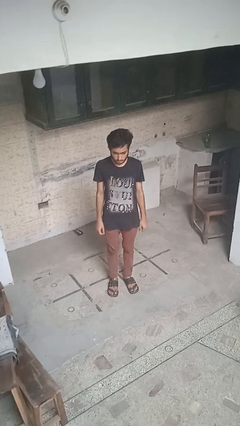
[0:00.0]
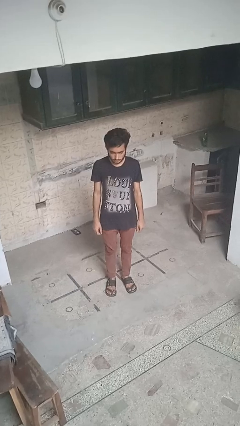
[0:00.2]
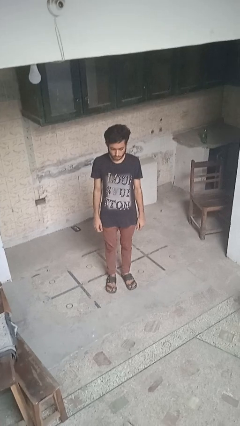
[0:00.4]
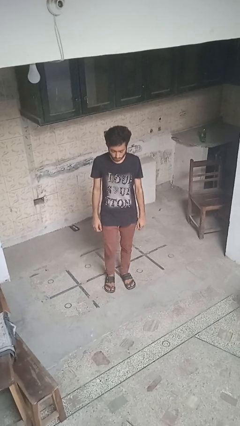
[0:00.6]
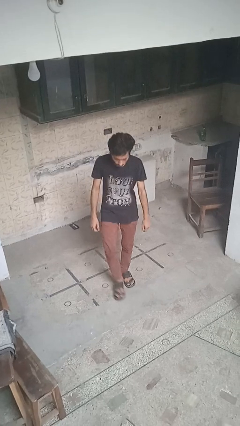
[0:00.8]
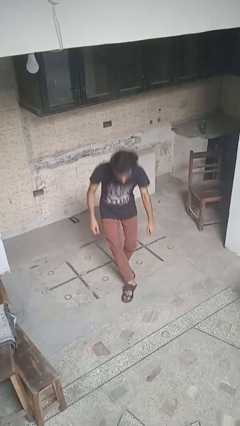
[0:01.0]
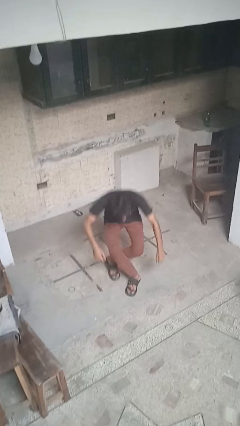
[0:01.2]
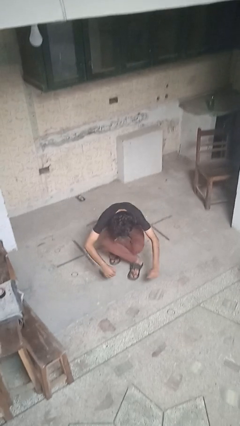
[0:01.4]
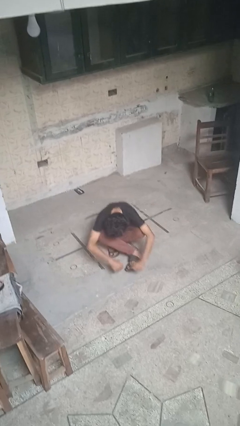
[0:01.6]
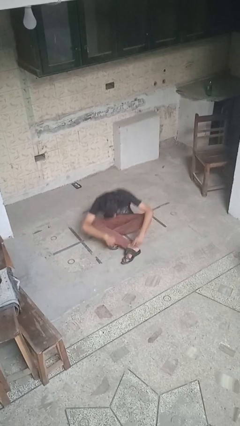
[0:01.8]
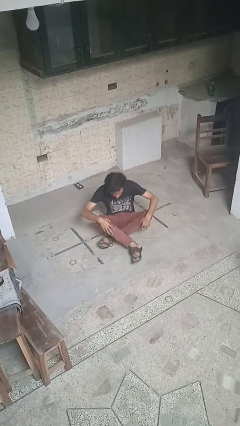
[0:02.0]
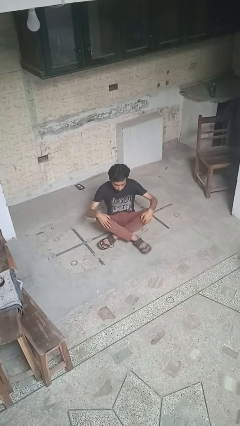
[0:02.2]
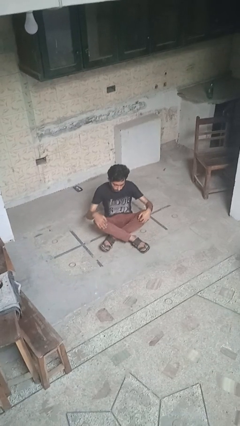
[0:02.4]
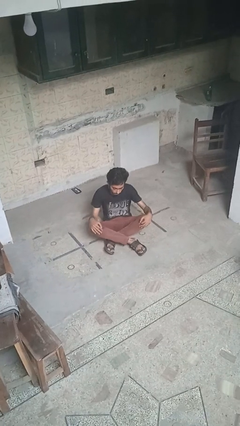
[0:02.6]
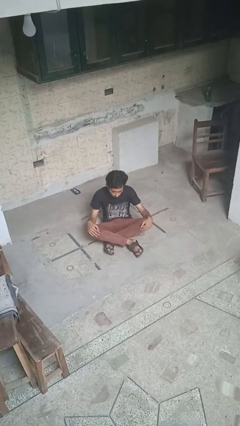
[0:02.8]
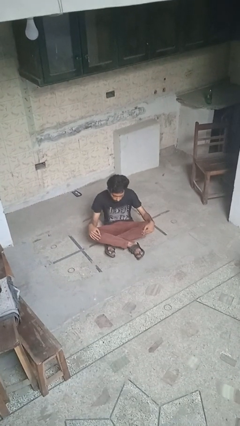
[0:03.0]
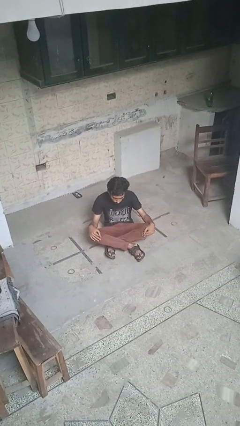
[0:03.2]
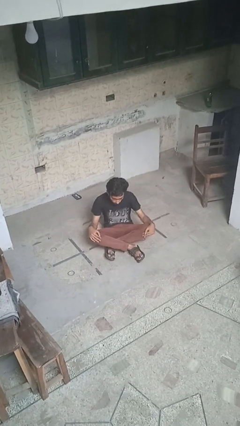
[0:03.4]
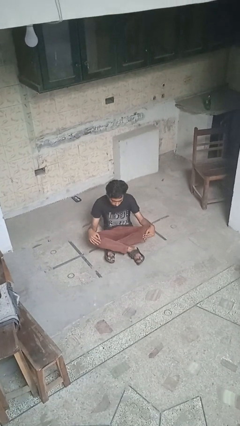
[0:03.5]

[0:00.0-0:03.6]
person sits crisscross

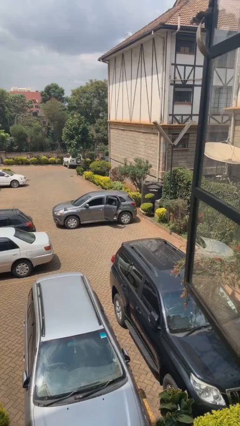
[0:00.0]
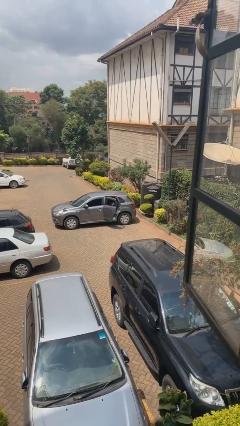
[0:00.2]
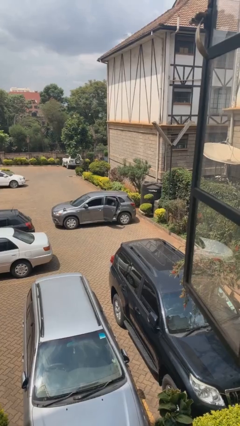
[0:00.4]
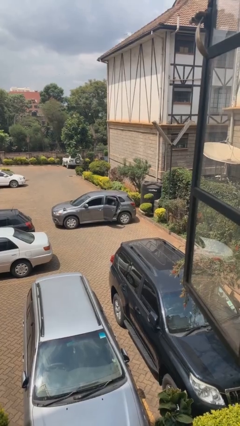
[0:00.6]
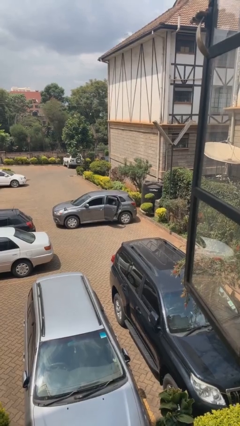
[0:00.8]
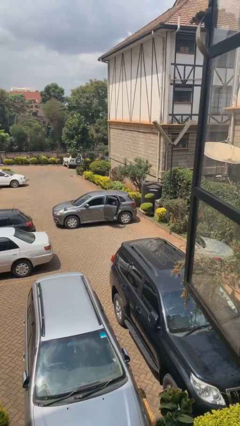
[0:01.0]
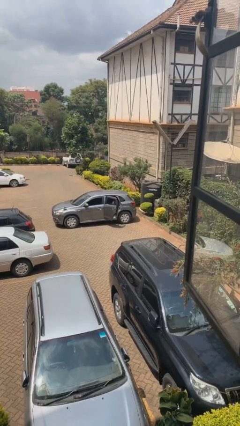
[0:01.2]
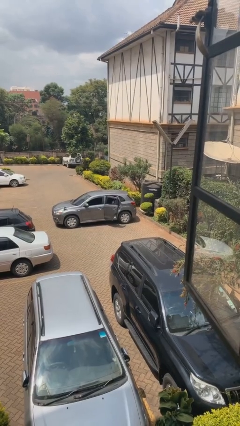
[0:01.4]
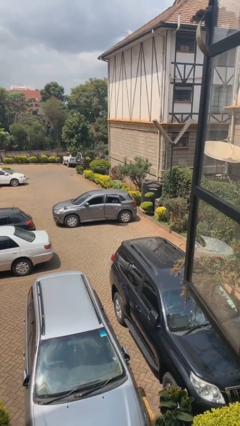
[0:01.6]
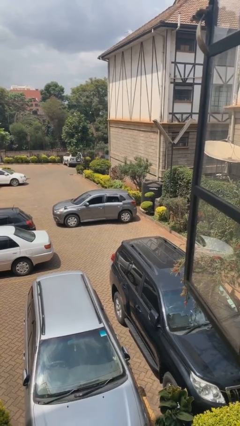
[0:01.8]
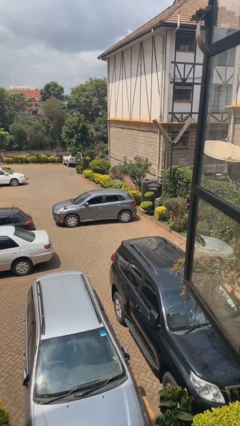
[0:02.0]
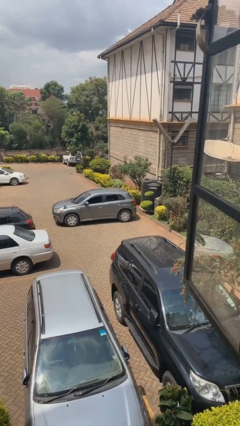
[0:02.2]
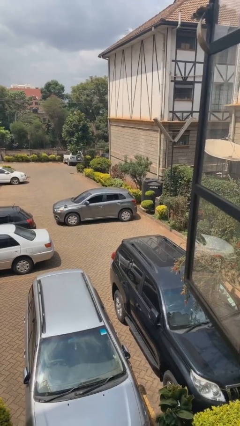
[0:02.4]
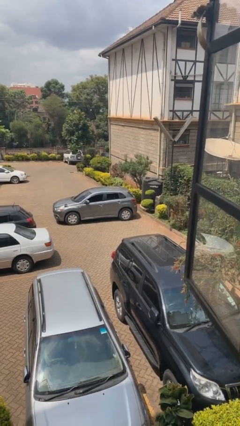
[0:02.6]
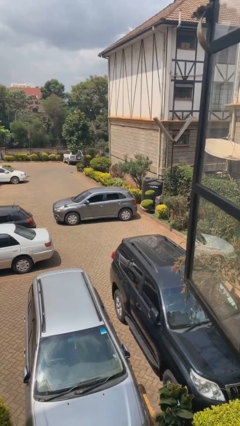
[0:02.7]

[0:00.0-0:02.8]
person closes car door

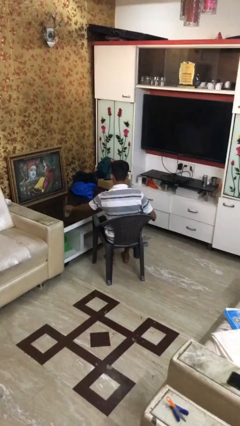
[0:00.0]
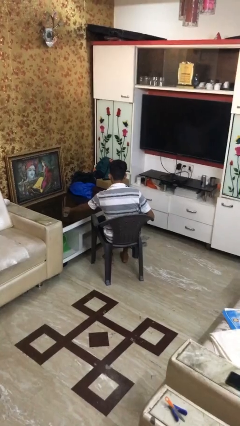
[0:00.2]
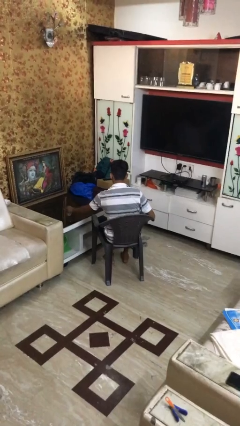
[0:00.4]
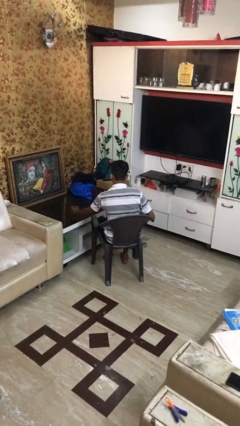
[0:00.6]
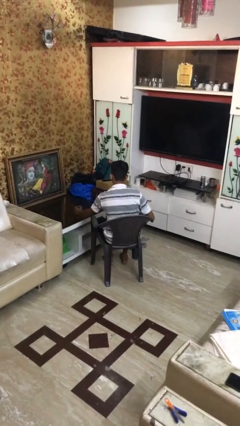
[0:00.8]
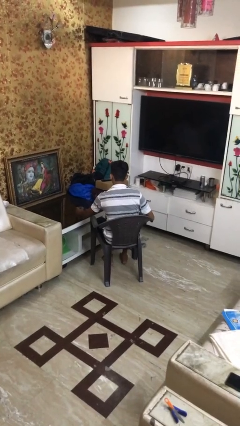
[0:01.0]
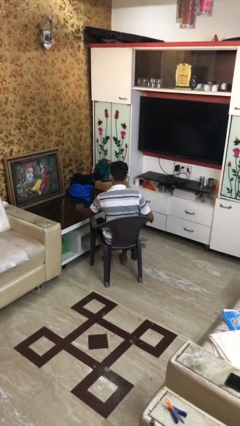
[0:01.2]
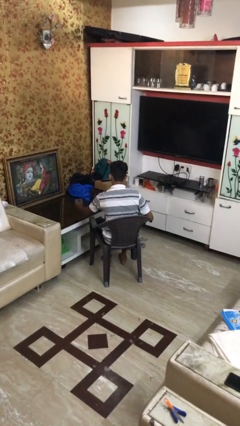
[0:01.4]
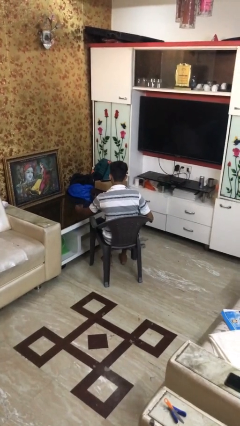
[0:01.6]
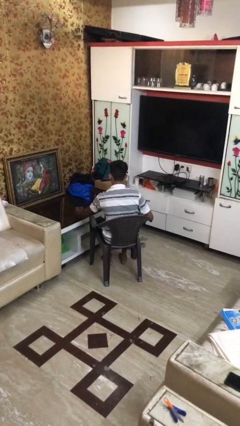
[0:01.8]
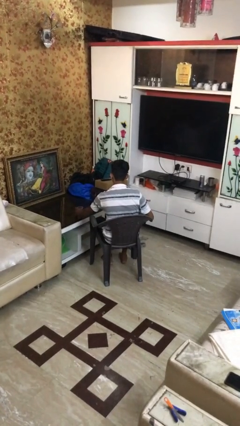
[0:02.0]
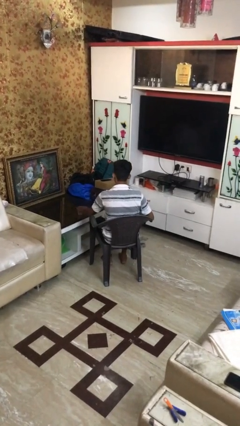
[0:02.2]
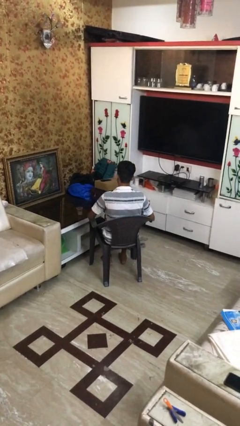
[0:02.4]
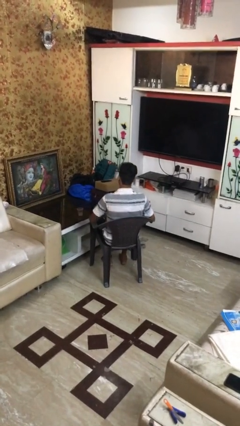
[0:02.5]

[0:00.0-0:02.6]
person sets upright glass

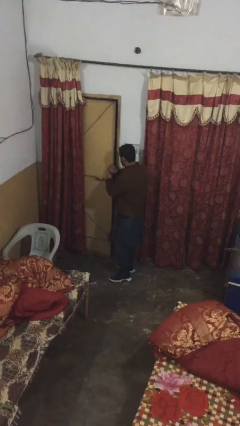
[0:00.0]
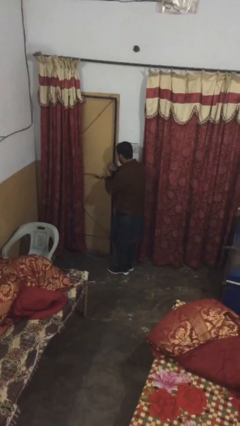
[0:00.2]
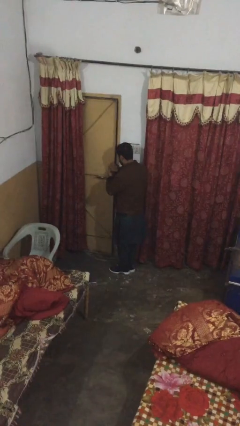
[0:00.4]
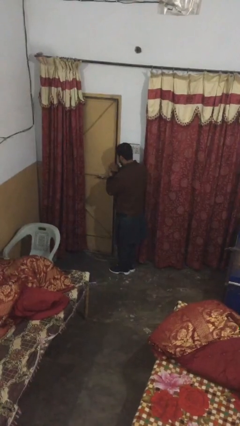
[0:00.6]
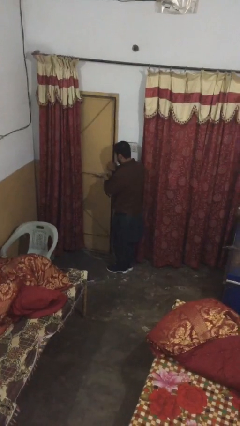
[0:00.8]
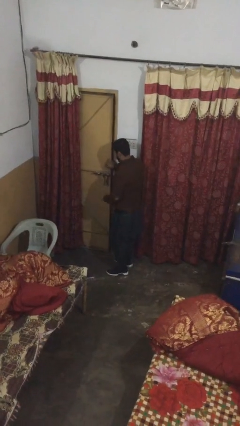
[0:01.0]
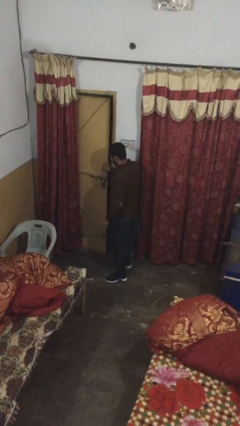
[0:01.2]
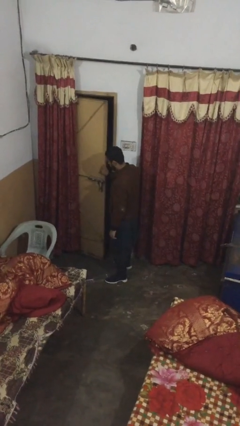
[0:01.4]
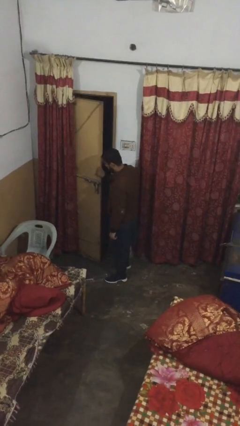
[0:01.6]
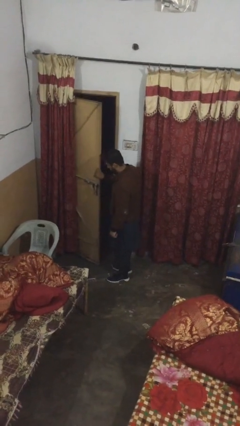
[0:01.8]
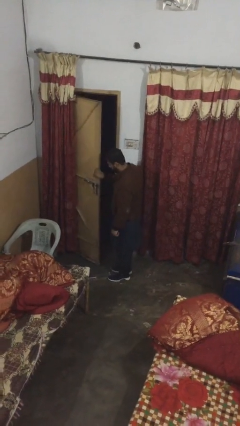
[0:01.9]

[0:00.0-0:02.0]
person opens facility door

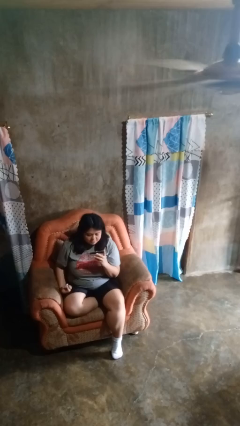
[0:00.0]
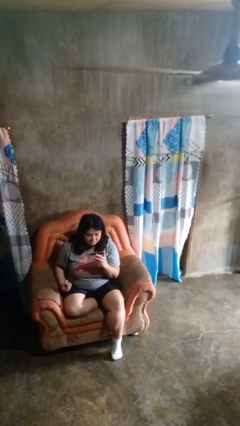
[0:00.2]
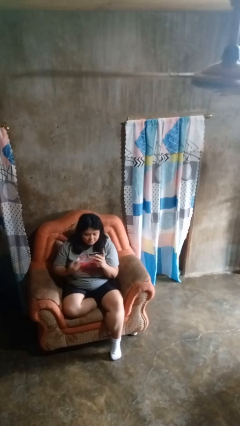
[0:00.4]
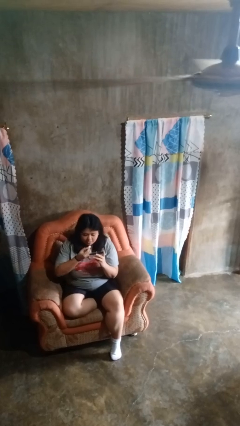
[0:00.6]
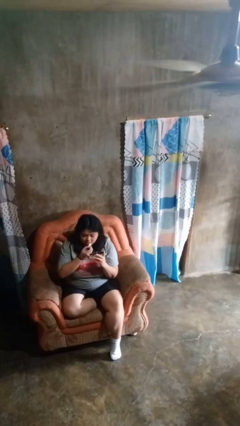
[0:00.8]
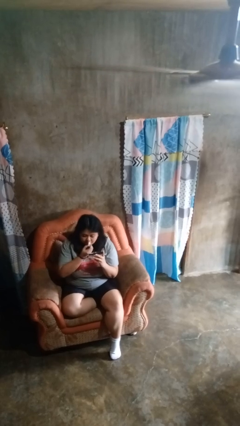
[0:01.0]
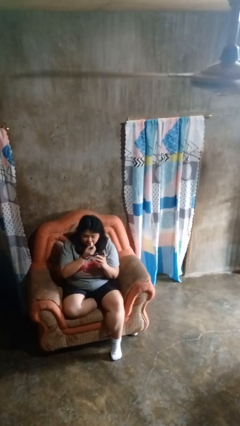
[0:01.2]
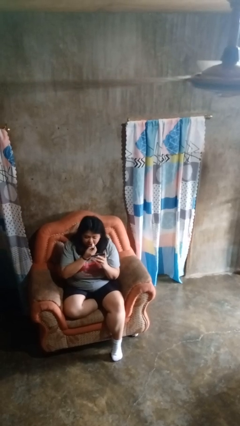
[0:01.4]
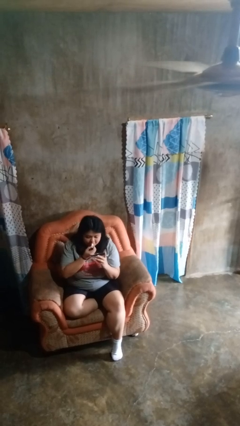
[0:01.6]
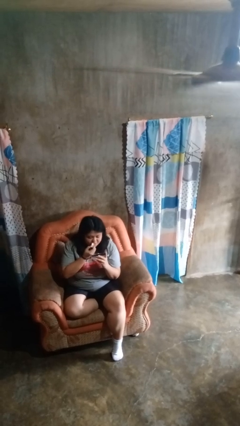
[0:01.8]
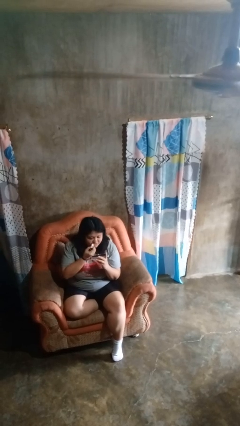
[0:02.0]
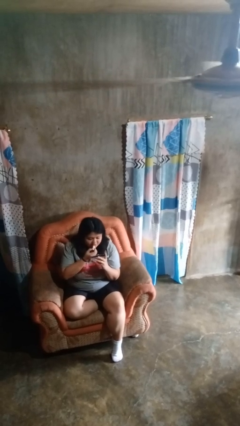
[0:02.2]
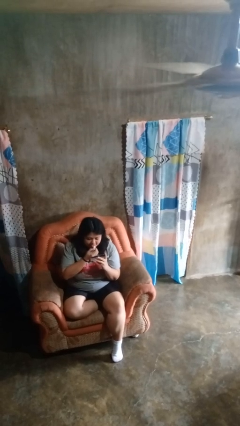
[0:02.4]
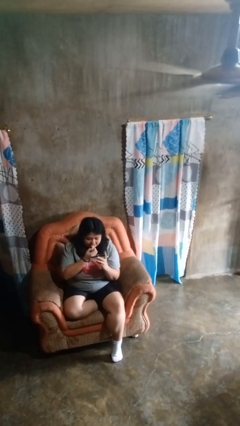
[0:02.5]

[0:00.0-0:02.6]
person applies lip makeup

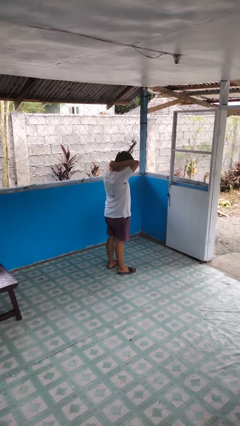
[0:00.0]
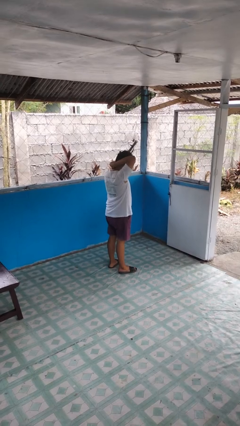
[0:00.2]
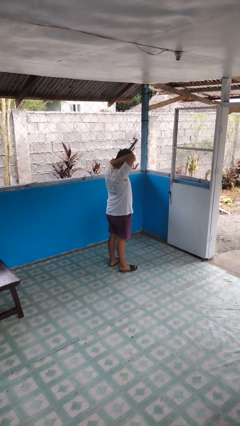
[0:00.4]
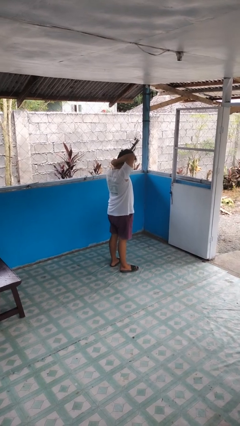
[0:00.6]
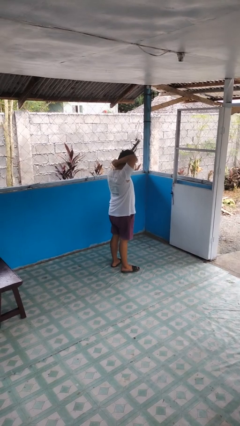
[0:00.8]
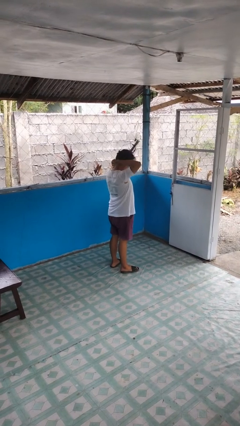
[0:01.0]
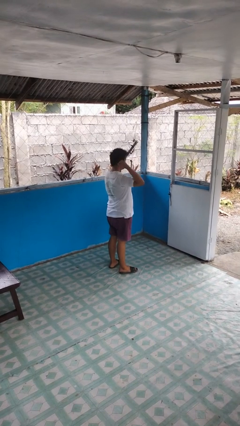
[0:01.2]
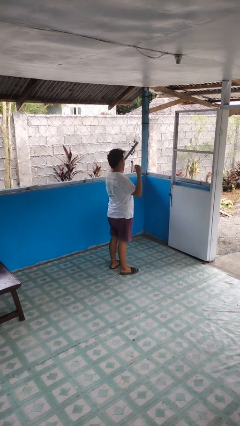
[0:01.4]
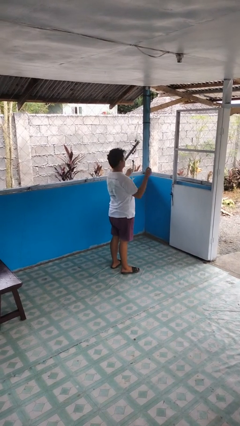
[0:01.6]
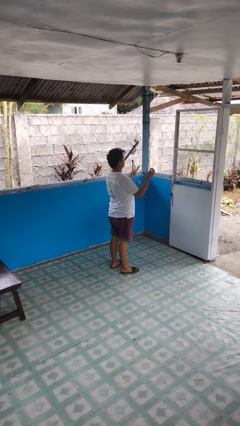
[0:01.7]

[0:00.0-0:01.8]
person takes off necklace

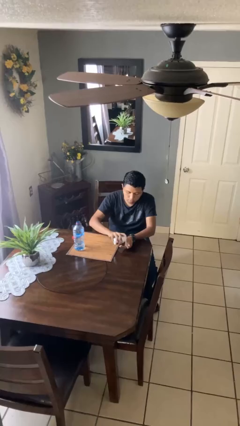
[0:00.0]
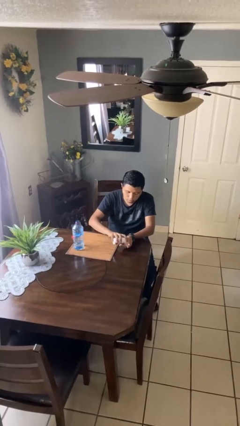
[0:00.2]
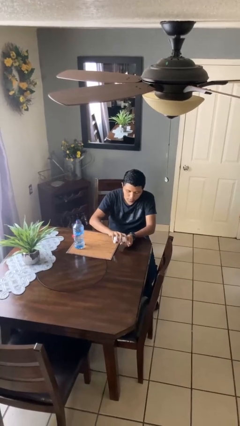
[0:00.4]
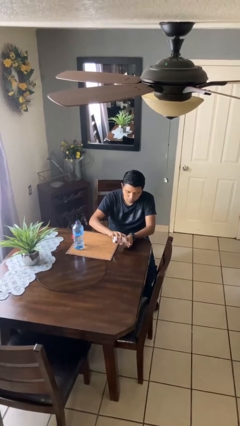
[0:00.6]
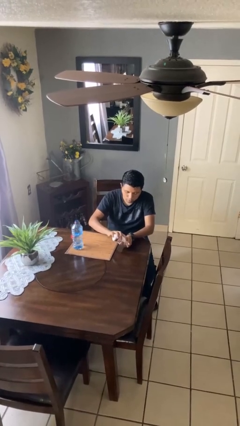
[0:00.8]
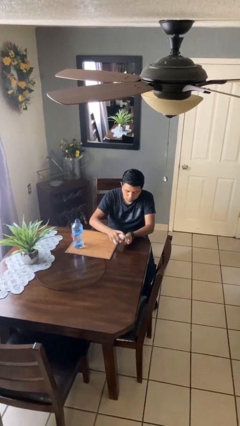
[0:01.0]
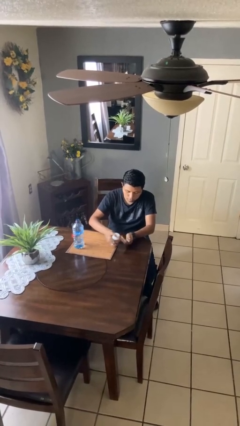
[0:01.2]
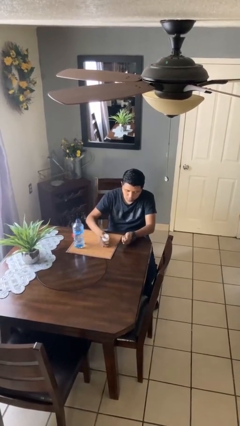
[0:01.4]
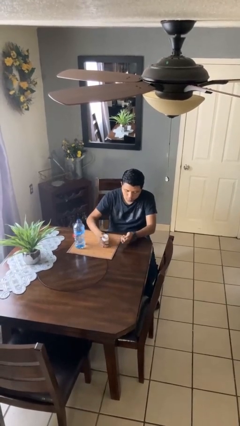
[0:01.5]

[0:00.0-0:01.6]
person takes medicine pills
